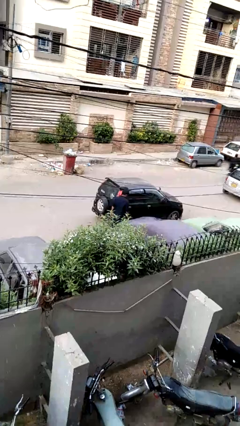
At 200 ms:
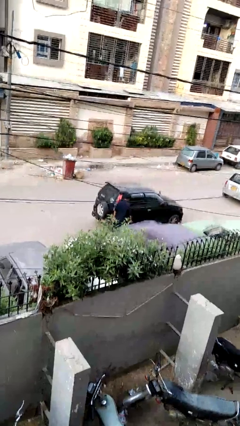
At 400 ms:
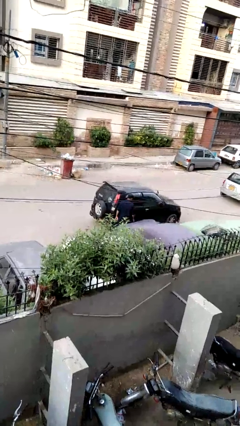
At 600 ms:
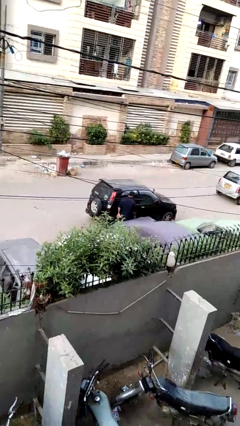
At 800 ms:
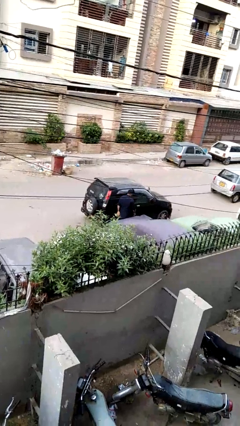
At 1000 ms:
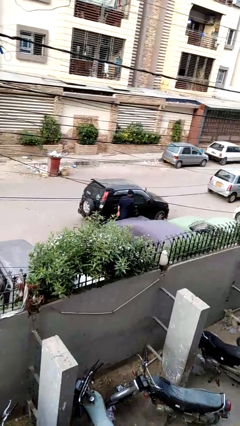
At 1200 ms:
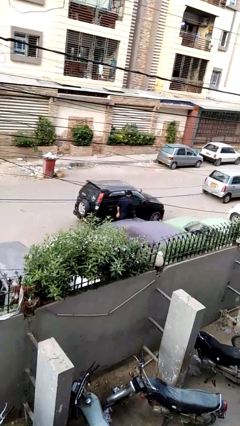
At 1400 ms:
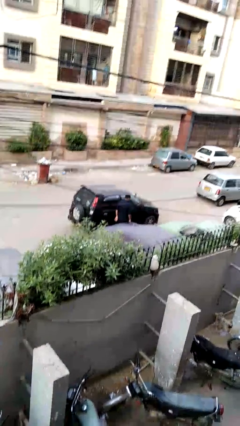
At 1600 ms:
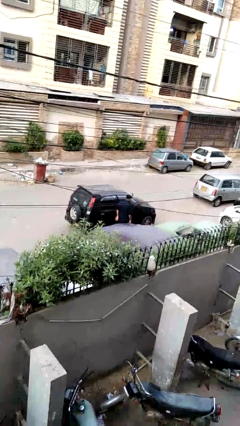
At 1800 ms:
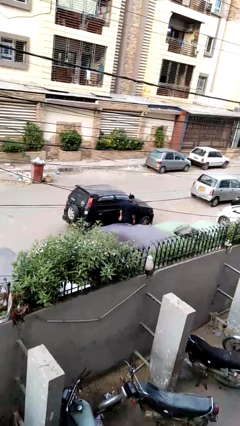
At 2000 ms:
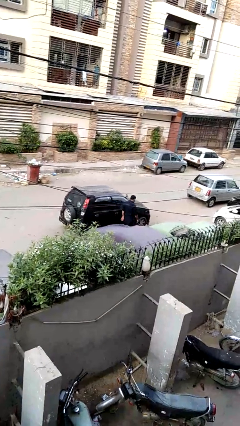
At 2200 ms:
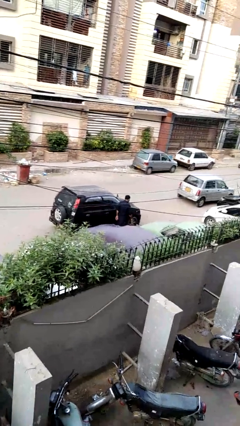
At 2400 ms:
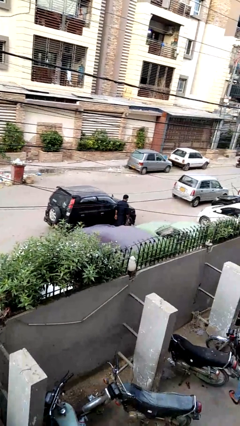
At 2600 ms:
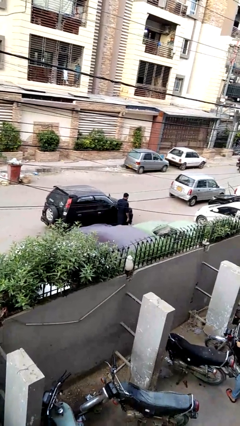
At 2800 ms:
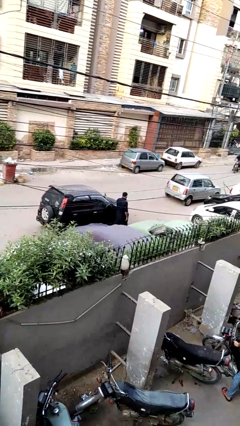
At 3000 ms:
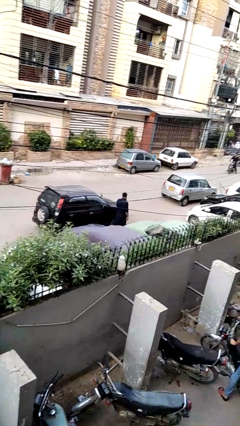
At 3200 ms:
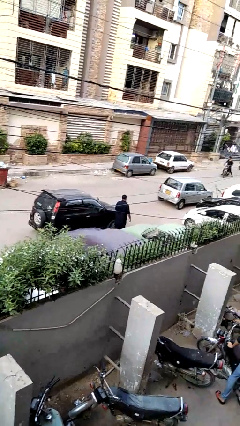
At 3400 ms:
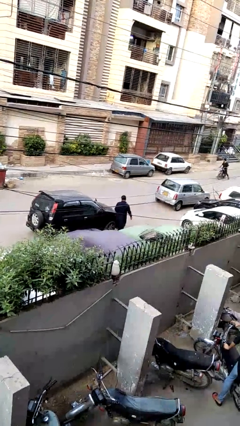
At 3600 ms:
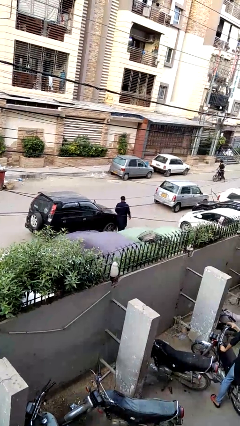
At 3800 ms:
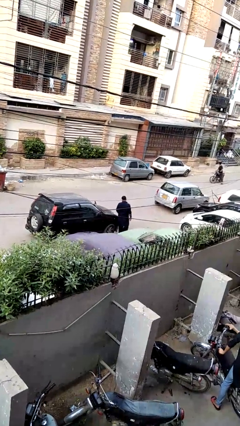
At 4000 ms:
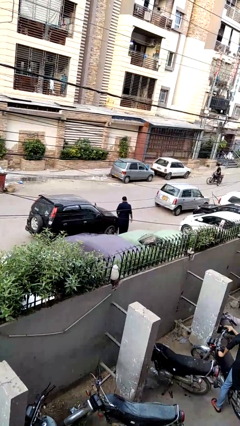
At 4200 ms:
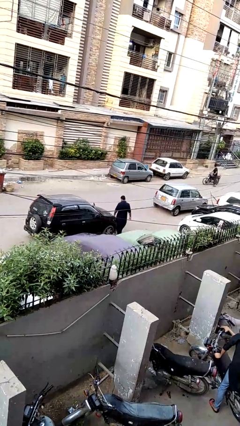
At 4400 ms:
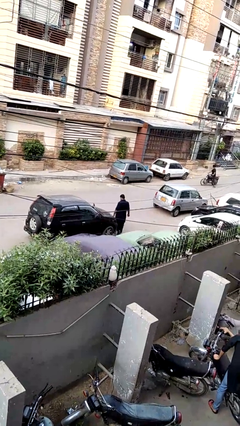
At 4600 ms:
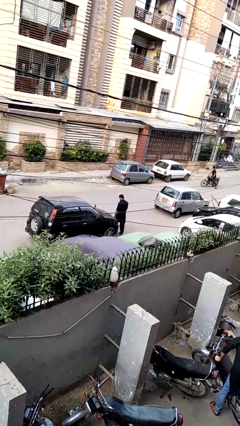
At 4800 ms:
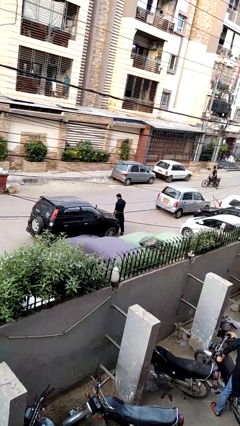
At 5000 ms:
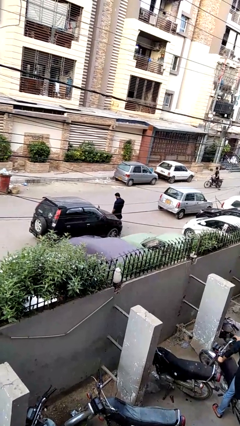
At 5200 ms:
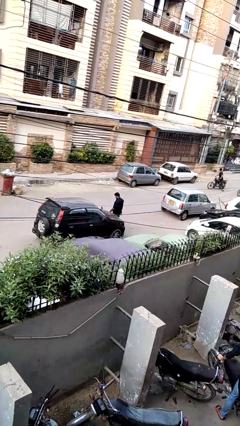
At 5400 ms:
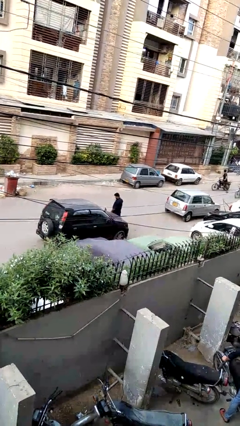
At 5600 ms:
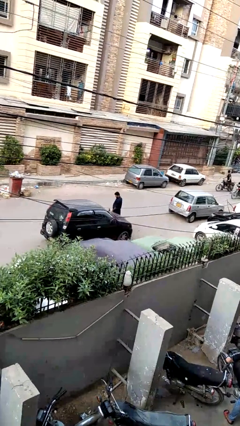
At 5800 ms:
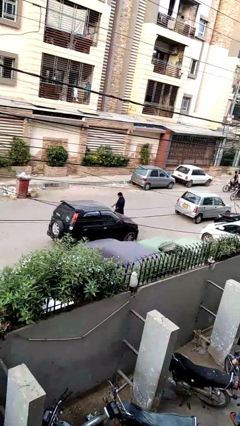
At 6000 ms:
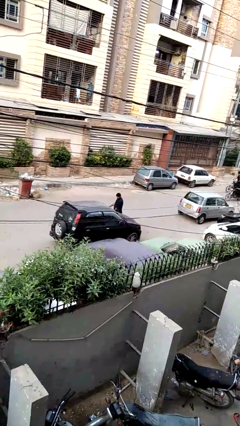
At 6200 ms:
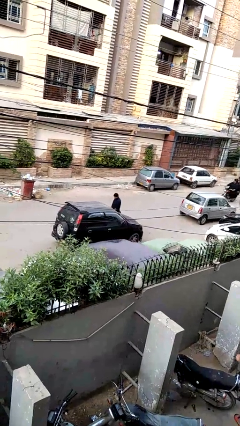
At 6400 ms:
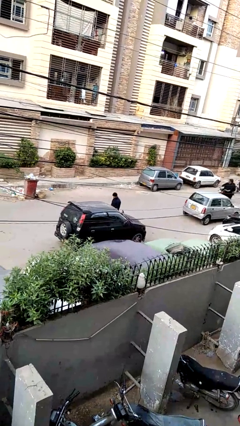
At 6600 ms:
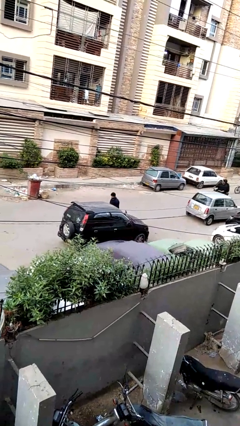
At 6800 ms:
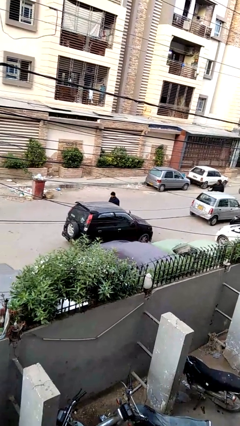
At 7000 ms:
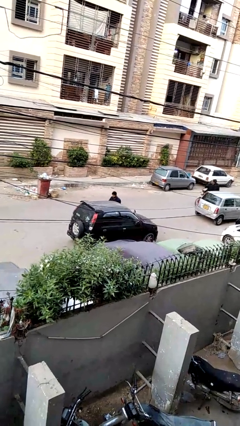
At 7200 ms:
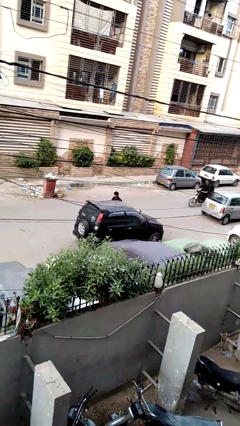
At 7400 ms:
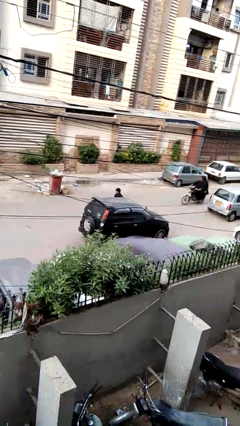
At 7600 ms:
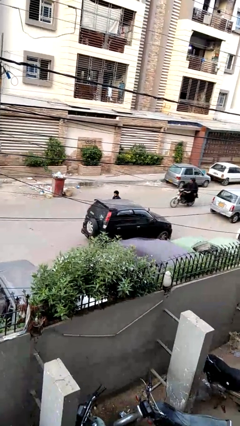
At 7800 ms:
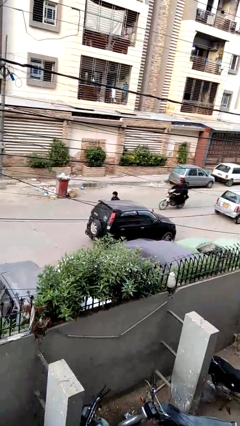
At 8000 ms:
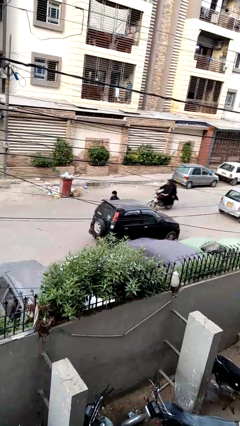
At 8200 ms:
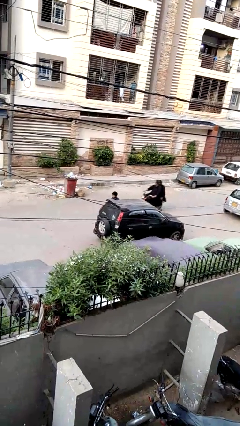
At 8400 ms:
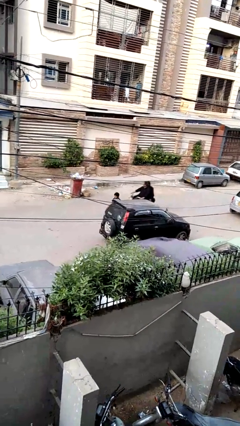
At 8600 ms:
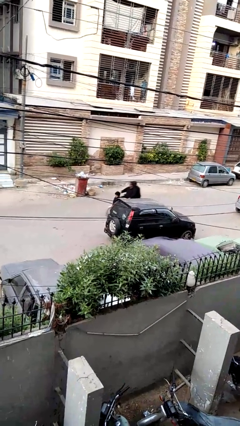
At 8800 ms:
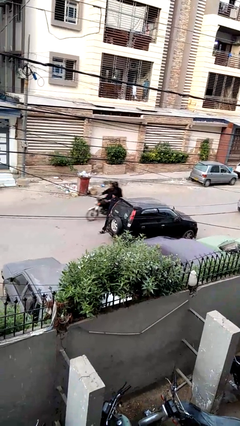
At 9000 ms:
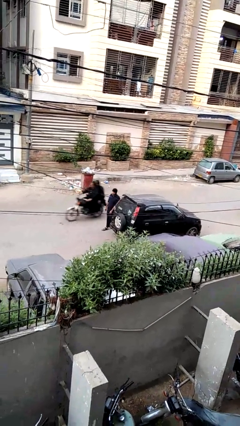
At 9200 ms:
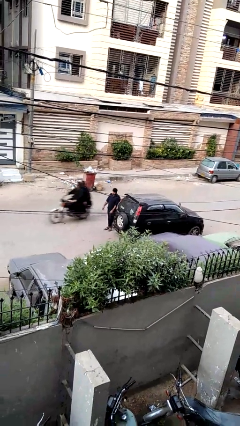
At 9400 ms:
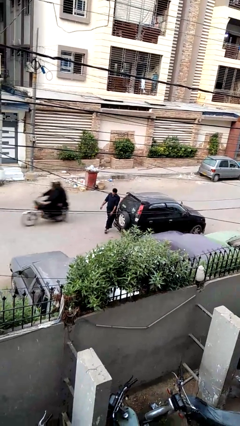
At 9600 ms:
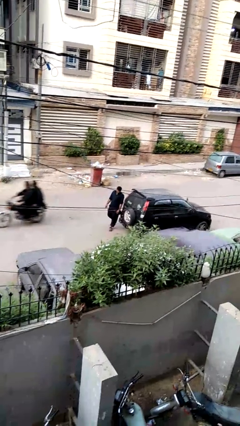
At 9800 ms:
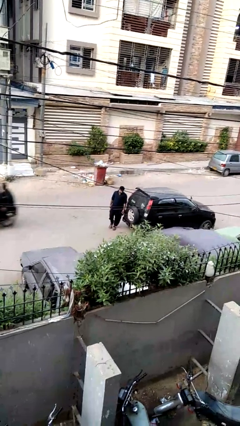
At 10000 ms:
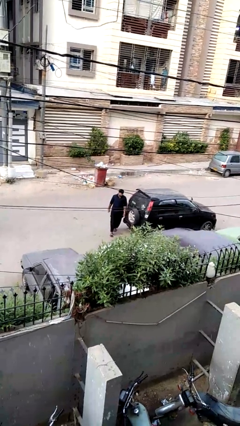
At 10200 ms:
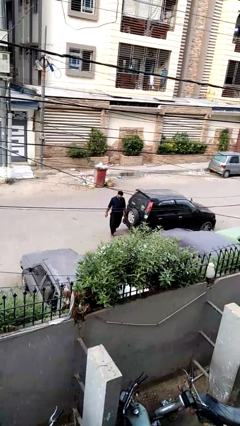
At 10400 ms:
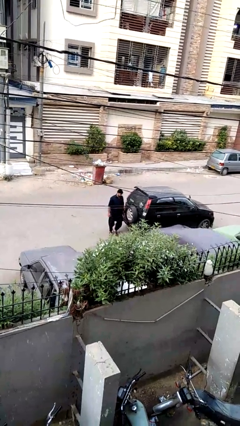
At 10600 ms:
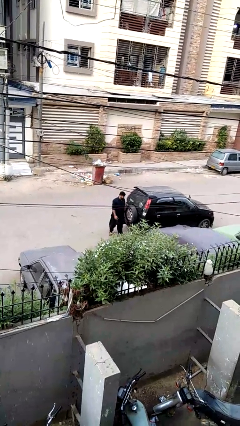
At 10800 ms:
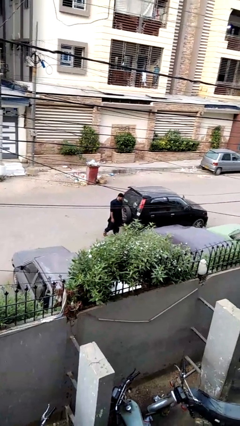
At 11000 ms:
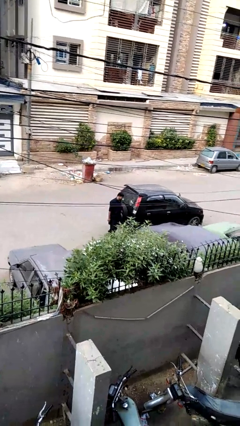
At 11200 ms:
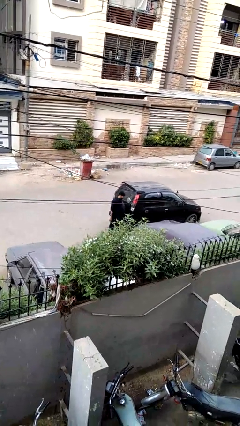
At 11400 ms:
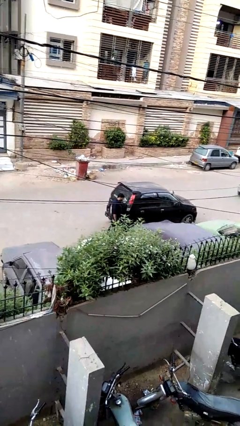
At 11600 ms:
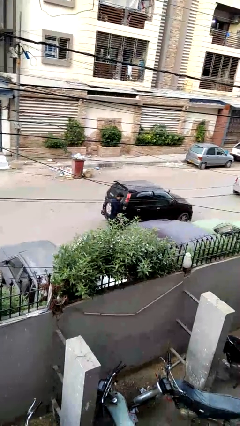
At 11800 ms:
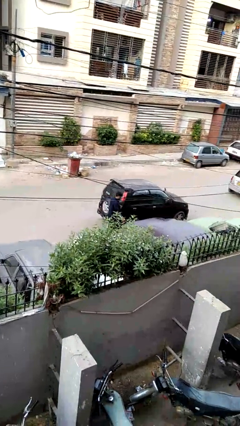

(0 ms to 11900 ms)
person walks around car

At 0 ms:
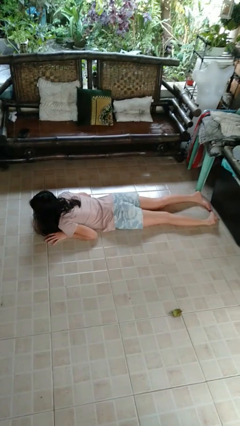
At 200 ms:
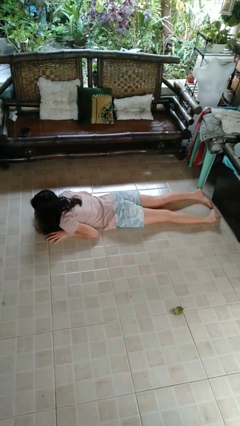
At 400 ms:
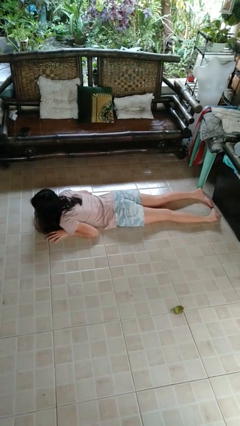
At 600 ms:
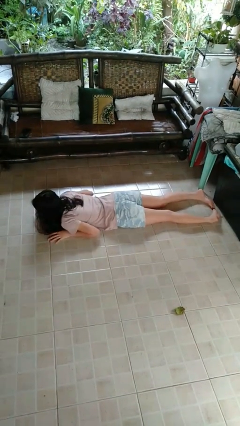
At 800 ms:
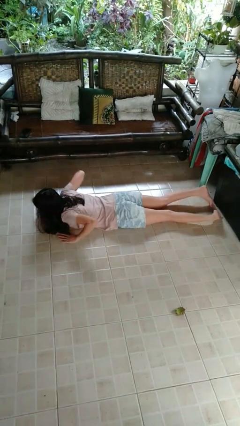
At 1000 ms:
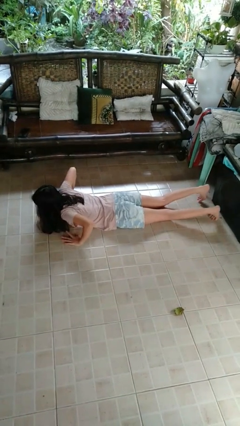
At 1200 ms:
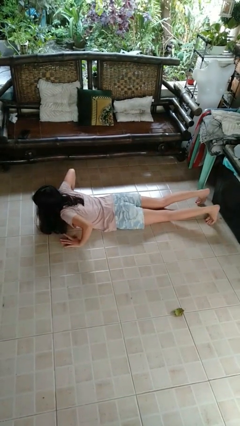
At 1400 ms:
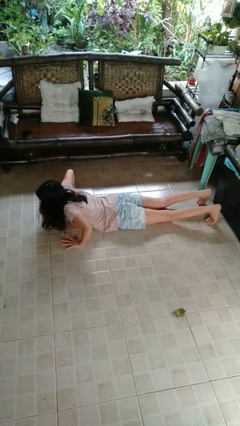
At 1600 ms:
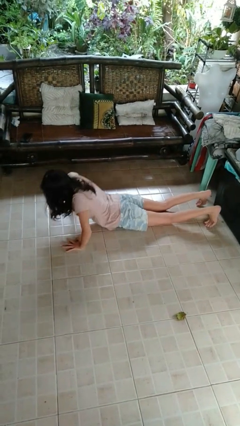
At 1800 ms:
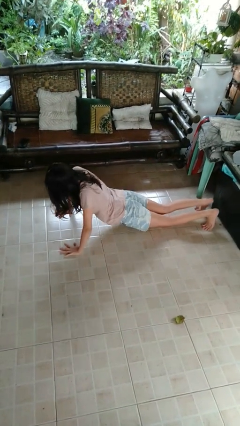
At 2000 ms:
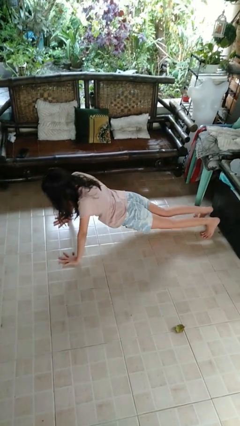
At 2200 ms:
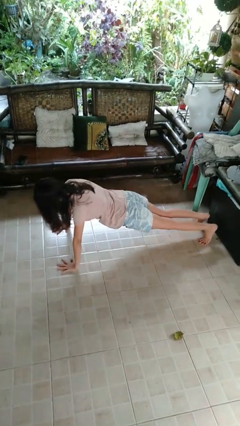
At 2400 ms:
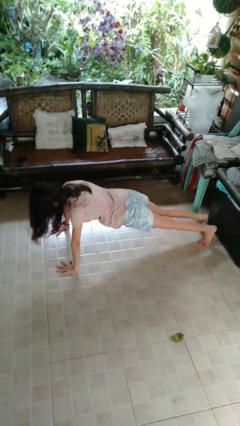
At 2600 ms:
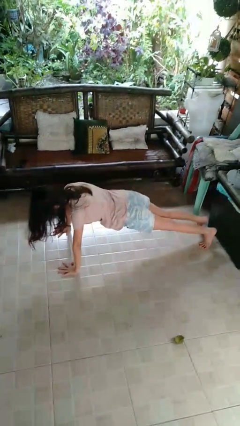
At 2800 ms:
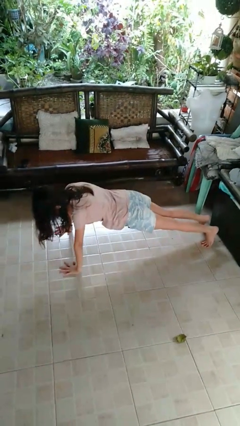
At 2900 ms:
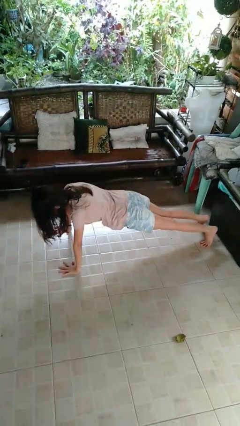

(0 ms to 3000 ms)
person exercises with pushup

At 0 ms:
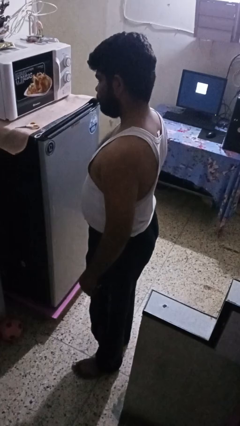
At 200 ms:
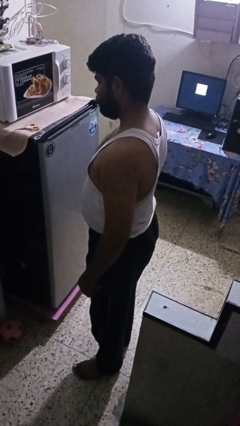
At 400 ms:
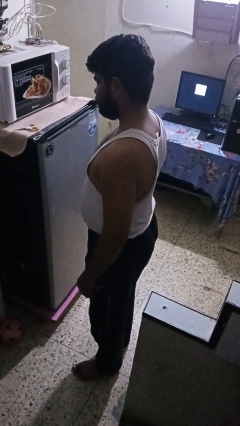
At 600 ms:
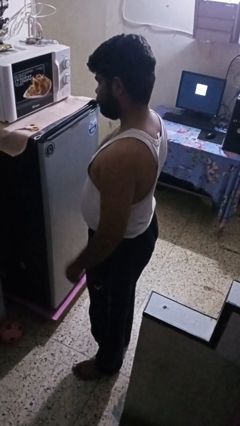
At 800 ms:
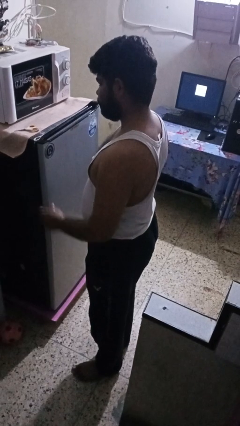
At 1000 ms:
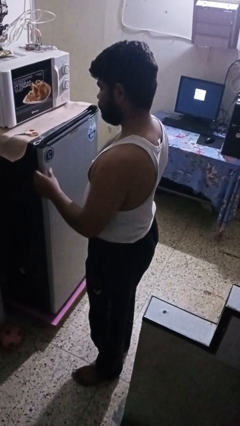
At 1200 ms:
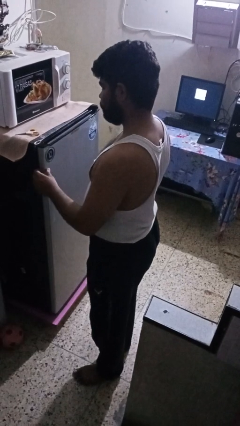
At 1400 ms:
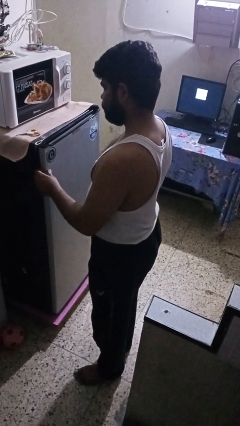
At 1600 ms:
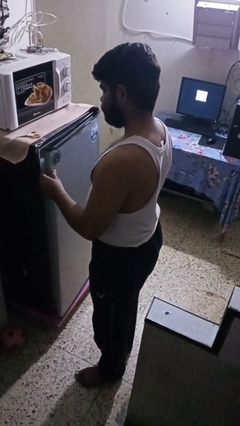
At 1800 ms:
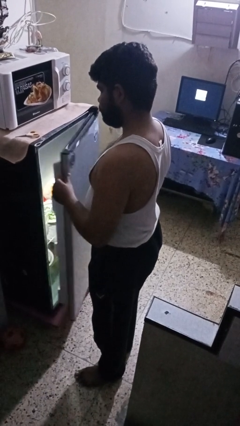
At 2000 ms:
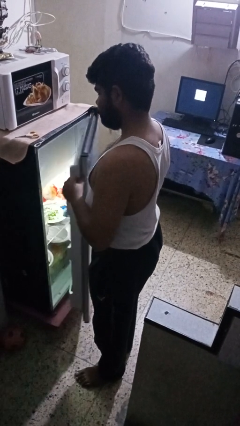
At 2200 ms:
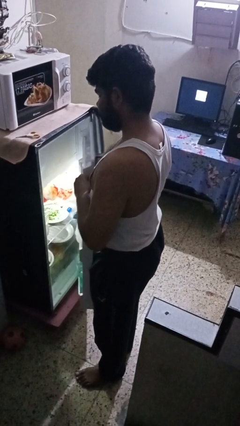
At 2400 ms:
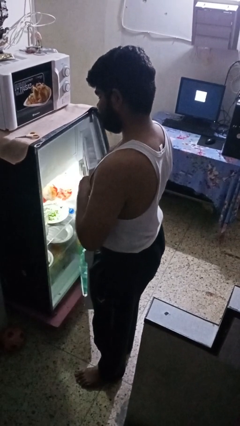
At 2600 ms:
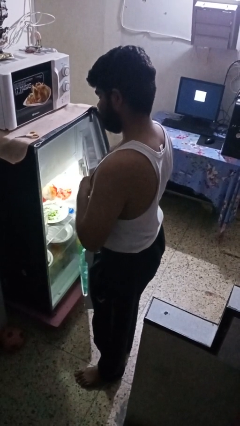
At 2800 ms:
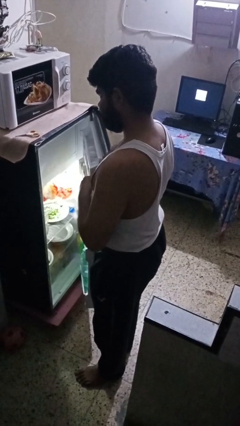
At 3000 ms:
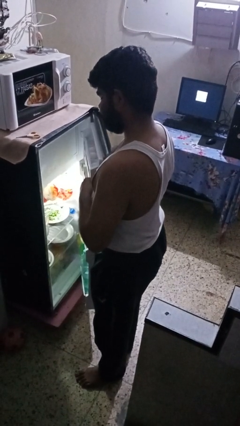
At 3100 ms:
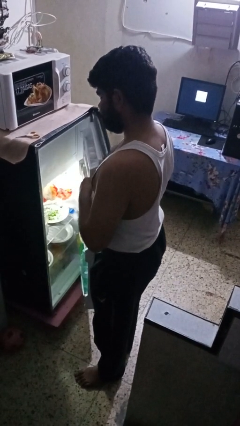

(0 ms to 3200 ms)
person opens refrigerator
